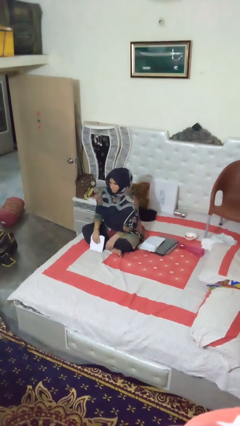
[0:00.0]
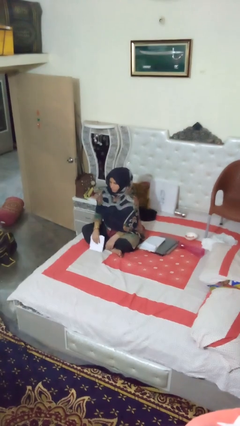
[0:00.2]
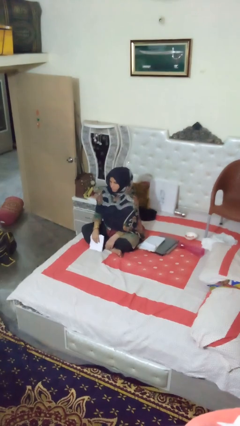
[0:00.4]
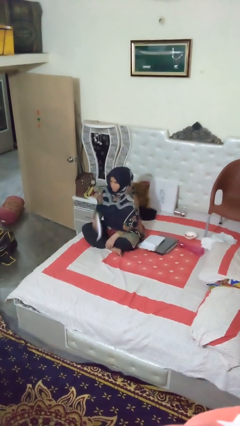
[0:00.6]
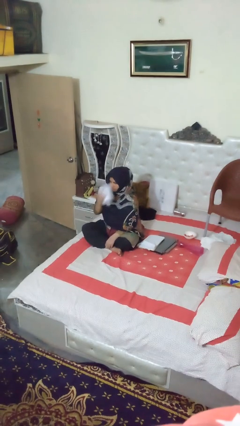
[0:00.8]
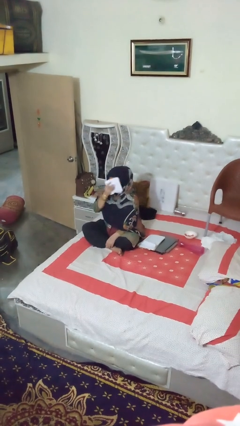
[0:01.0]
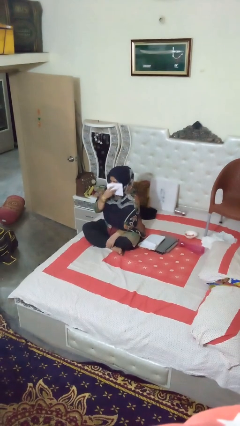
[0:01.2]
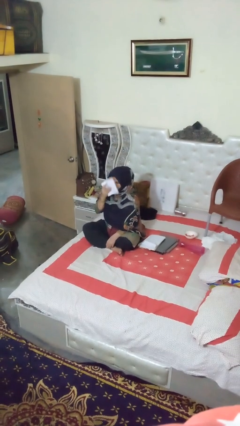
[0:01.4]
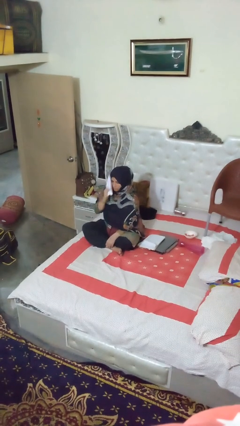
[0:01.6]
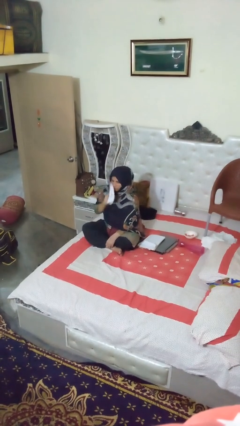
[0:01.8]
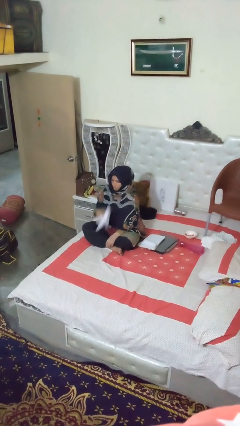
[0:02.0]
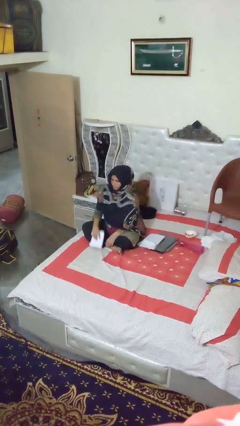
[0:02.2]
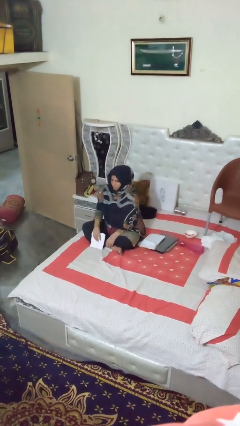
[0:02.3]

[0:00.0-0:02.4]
person wipes mouth with napkin

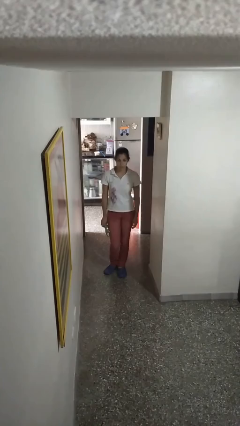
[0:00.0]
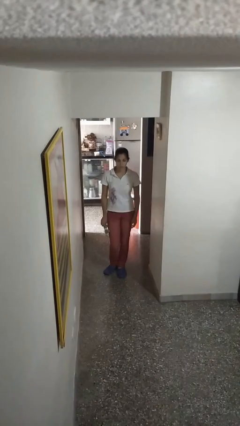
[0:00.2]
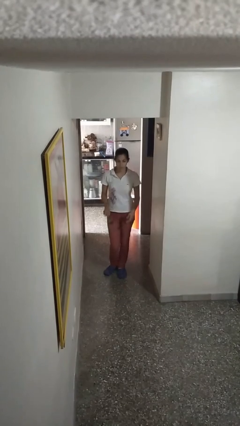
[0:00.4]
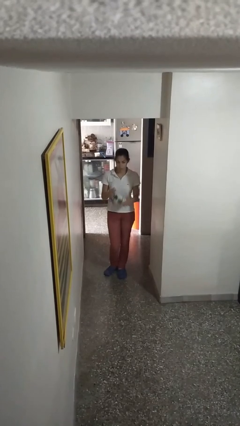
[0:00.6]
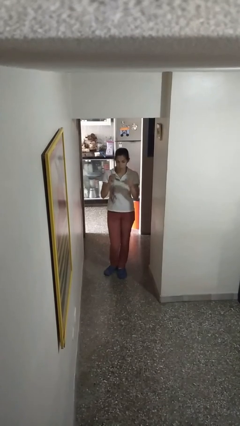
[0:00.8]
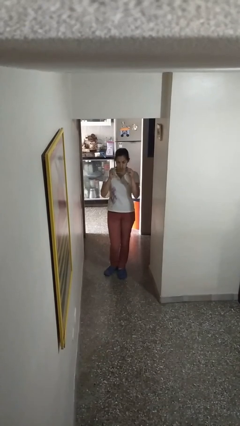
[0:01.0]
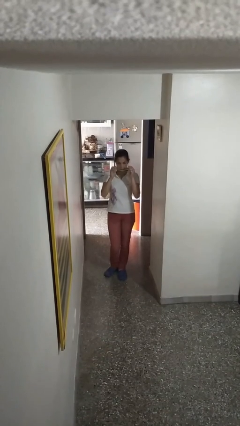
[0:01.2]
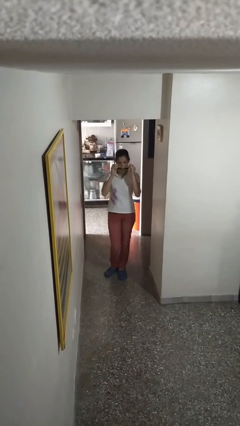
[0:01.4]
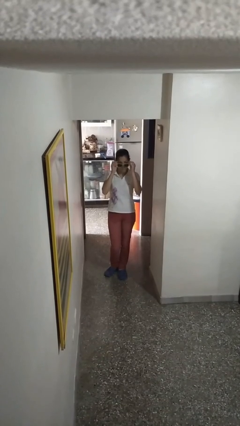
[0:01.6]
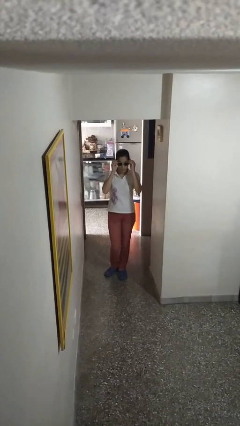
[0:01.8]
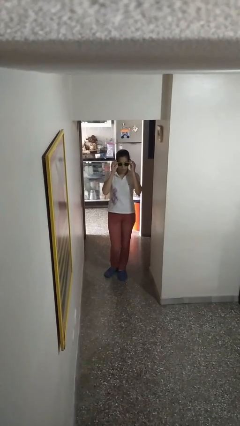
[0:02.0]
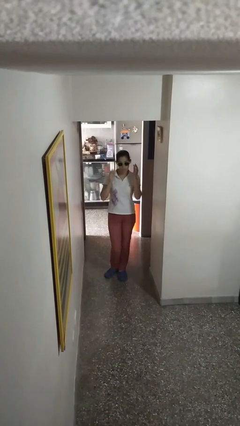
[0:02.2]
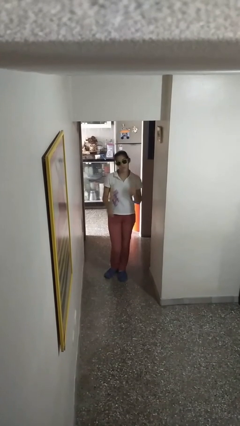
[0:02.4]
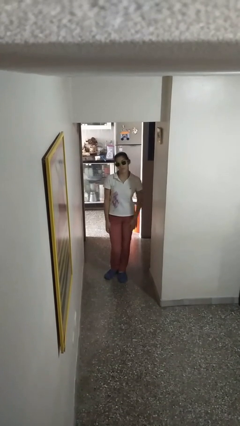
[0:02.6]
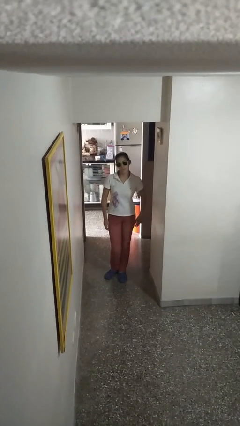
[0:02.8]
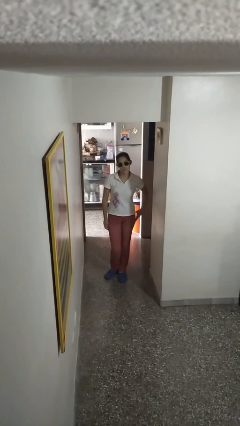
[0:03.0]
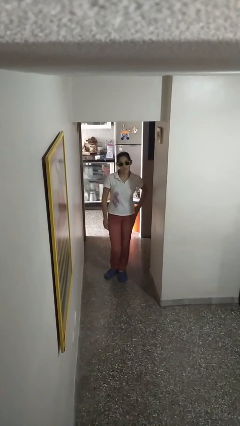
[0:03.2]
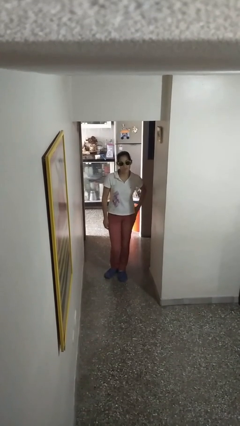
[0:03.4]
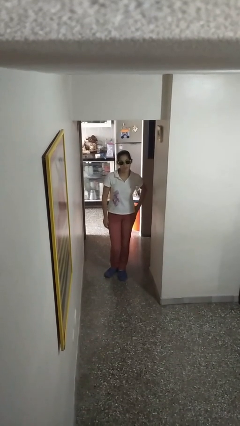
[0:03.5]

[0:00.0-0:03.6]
person puts on sunglasses

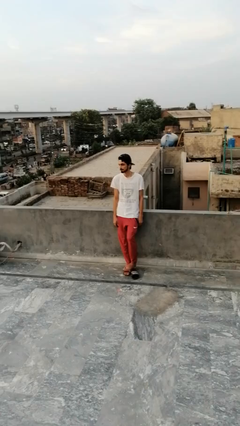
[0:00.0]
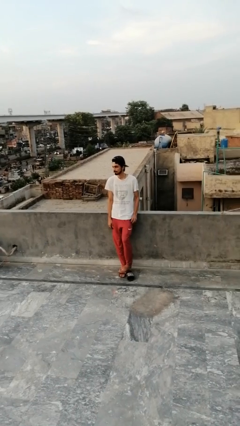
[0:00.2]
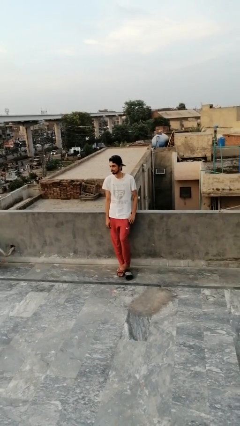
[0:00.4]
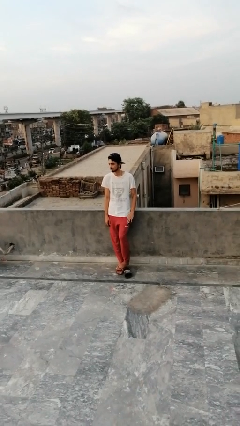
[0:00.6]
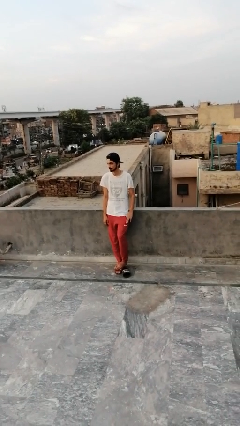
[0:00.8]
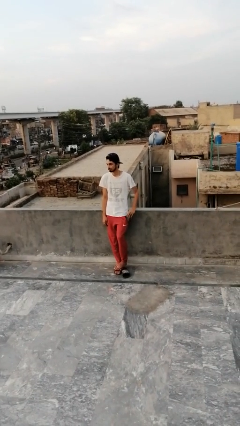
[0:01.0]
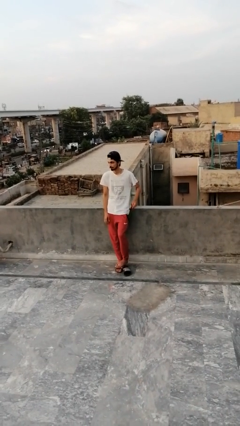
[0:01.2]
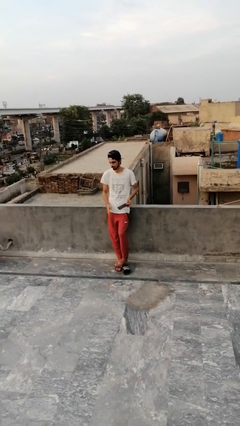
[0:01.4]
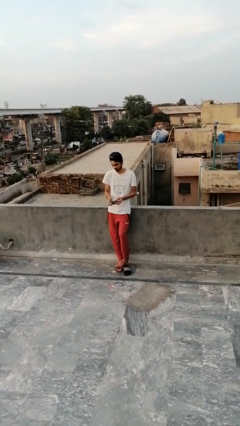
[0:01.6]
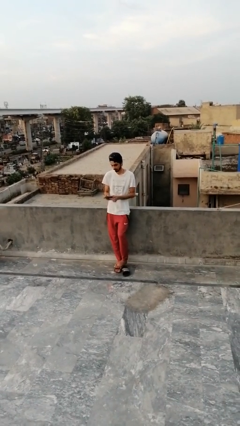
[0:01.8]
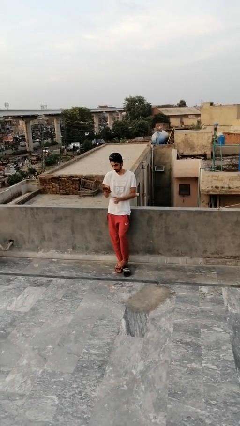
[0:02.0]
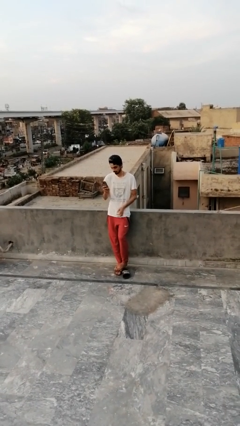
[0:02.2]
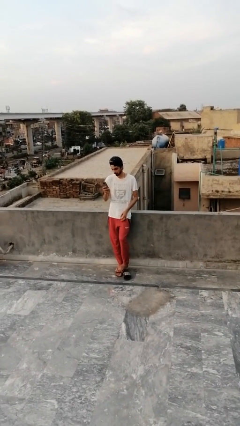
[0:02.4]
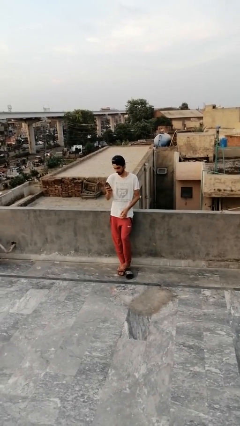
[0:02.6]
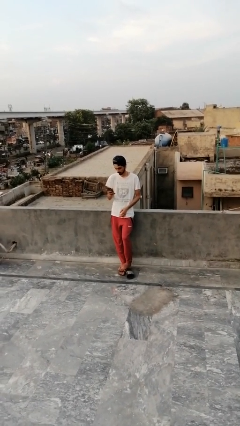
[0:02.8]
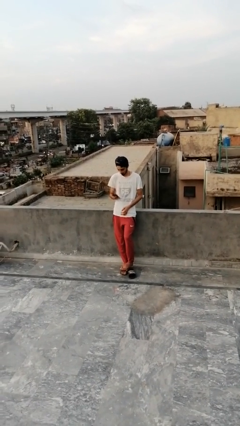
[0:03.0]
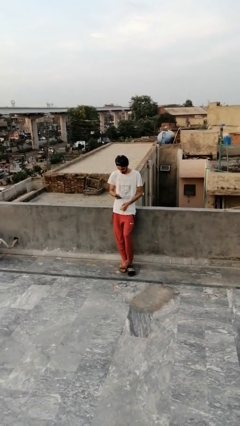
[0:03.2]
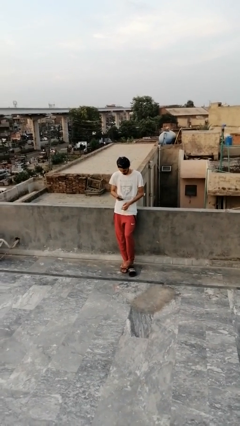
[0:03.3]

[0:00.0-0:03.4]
person takes phone from pocket

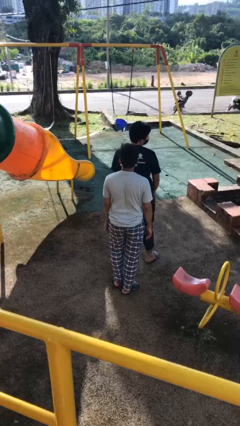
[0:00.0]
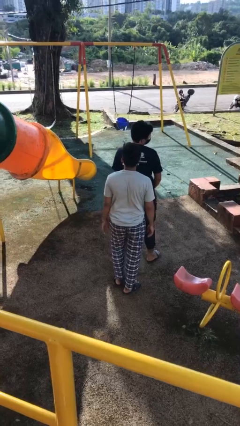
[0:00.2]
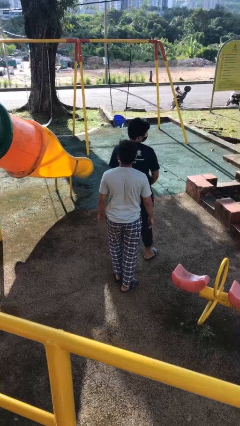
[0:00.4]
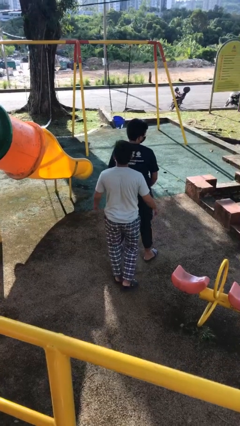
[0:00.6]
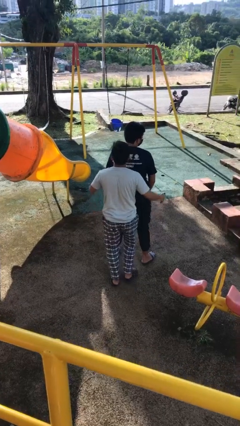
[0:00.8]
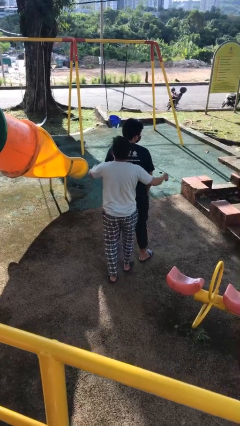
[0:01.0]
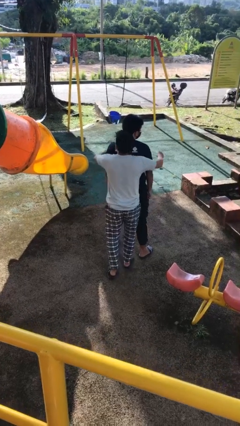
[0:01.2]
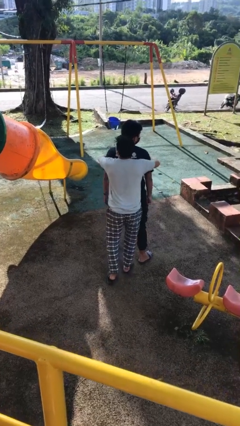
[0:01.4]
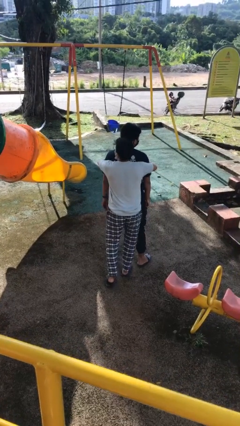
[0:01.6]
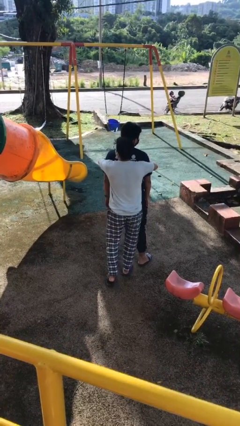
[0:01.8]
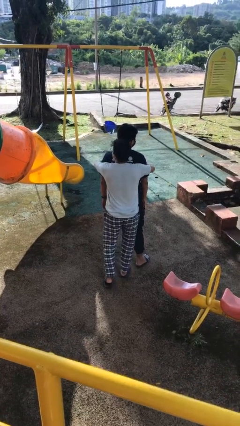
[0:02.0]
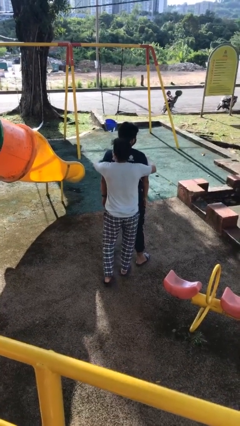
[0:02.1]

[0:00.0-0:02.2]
person hugs person from behind

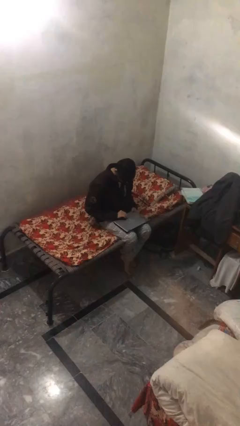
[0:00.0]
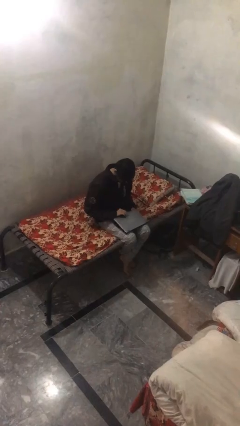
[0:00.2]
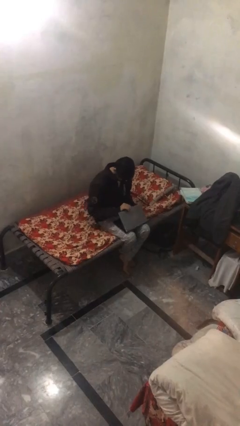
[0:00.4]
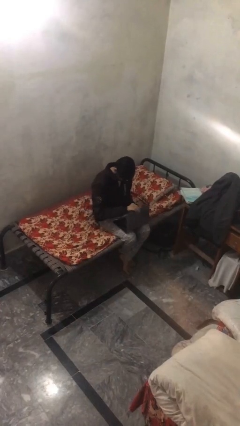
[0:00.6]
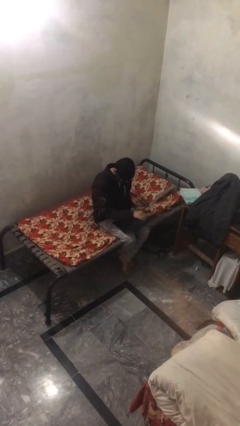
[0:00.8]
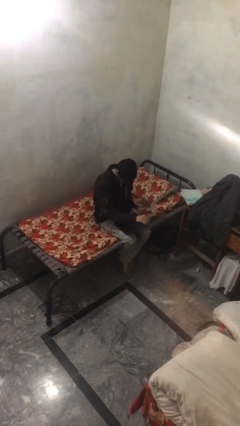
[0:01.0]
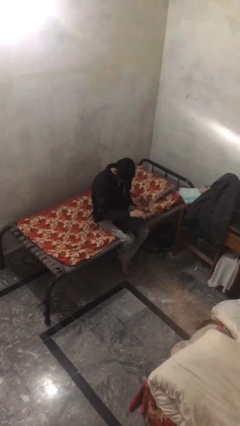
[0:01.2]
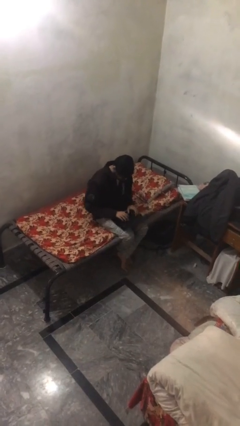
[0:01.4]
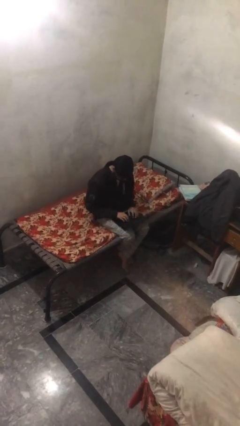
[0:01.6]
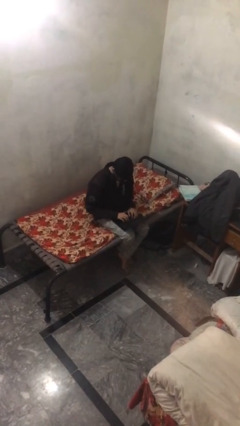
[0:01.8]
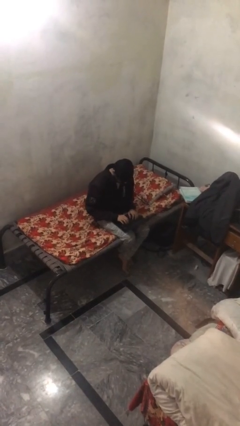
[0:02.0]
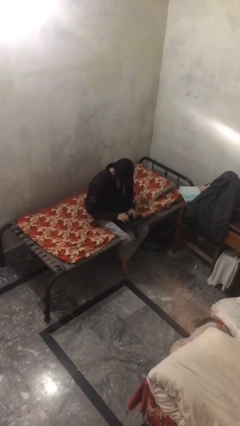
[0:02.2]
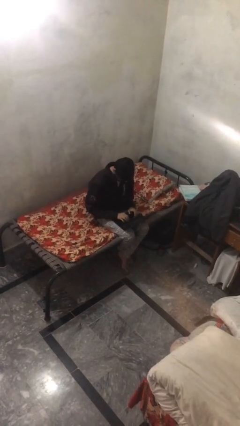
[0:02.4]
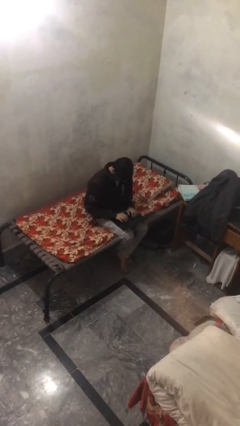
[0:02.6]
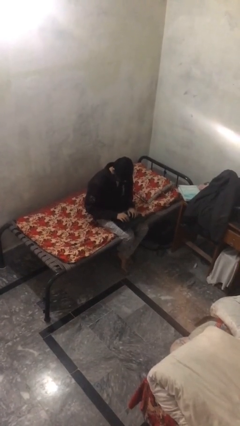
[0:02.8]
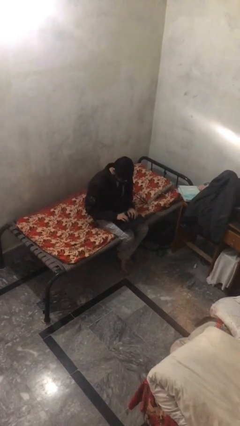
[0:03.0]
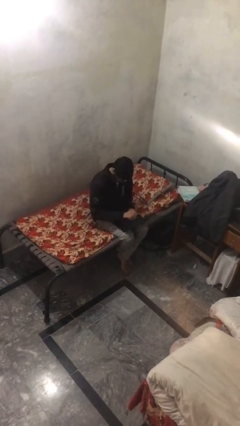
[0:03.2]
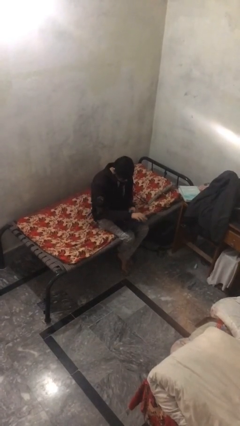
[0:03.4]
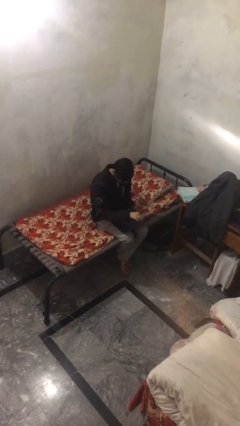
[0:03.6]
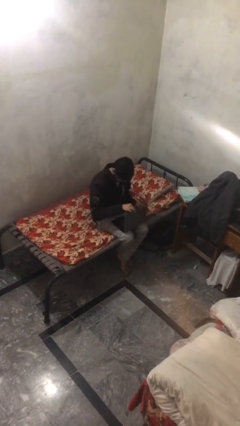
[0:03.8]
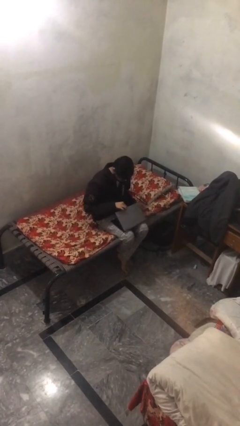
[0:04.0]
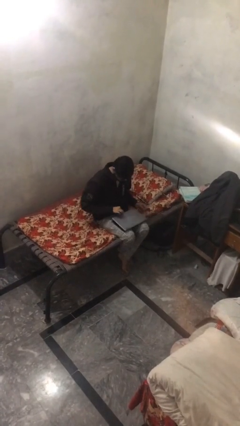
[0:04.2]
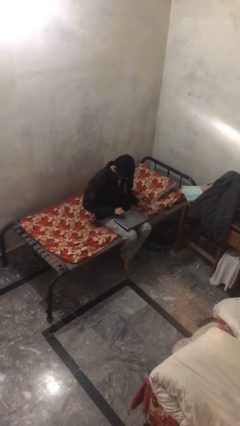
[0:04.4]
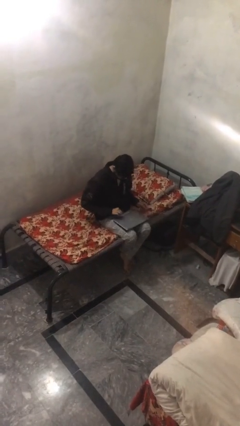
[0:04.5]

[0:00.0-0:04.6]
person interacts with laptop

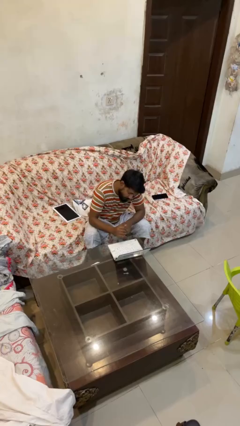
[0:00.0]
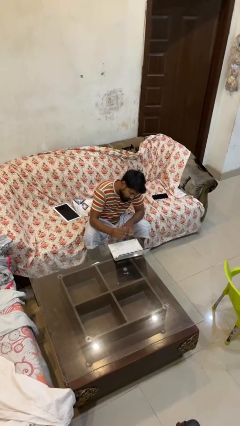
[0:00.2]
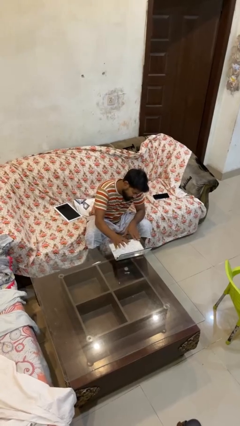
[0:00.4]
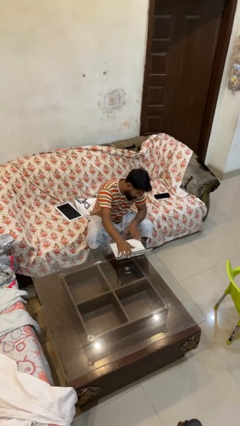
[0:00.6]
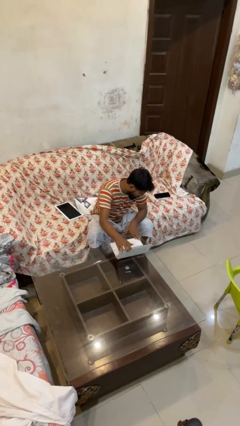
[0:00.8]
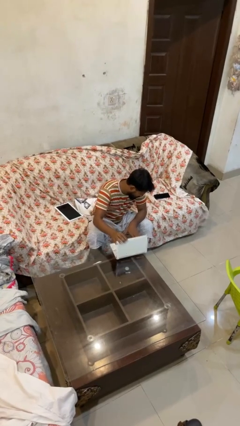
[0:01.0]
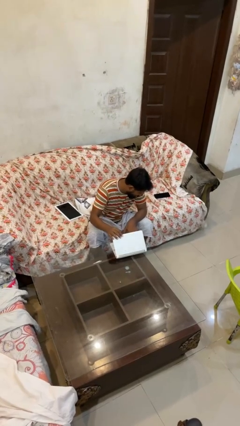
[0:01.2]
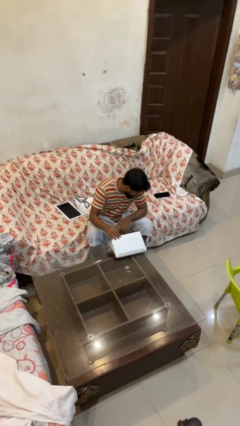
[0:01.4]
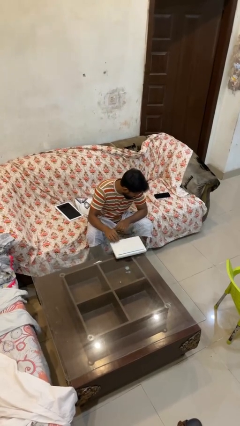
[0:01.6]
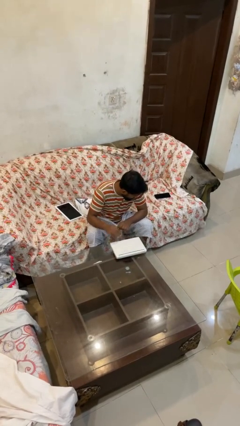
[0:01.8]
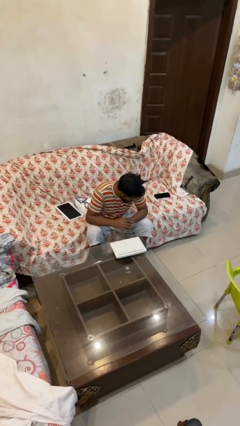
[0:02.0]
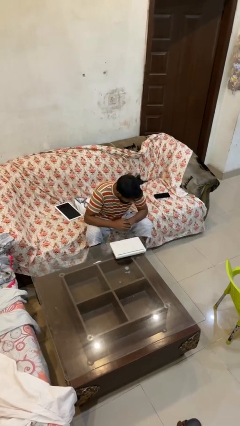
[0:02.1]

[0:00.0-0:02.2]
person closes laptop
